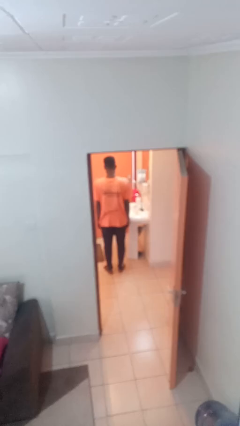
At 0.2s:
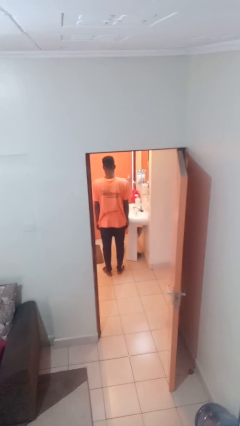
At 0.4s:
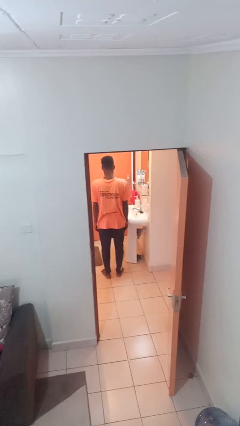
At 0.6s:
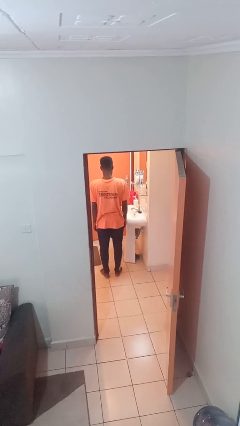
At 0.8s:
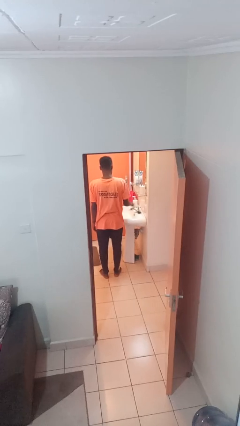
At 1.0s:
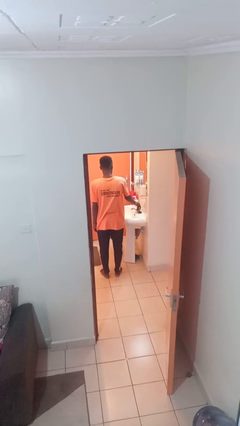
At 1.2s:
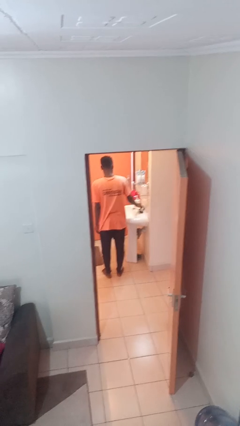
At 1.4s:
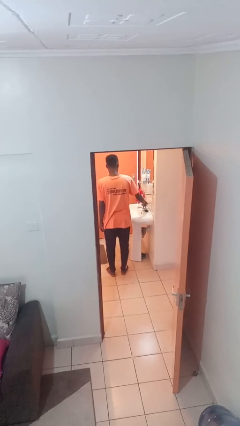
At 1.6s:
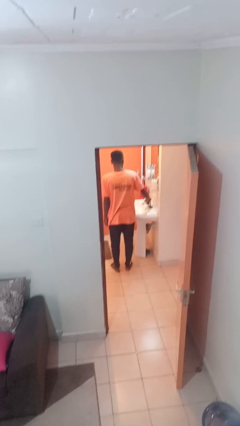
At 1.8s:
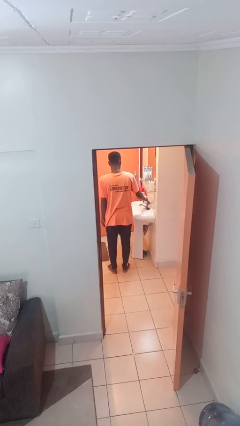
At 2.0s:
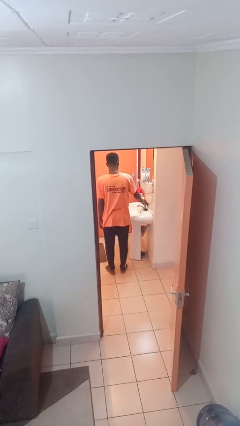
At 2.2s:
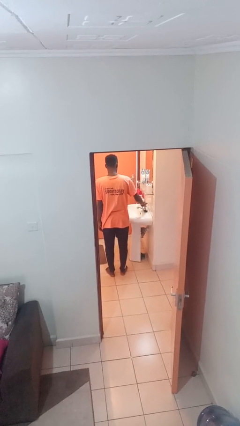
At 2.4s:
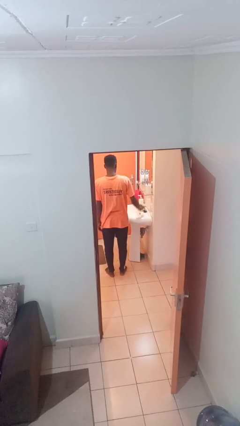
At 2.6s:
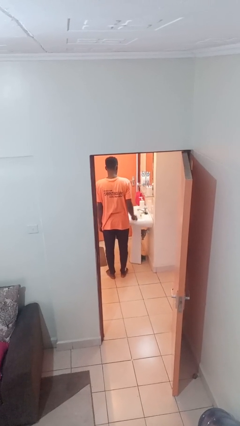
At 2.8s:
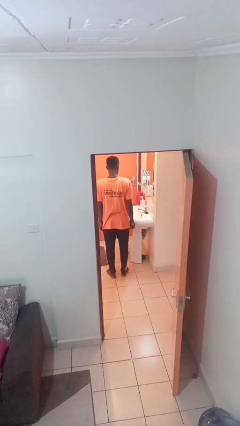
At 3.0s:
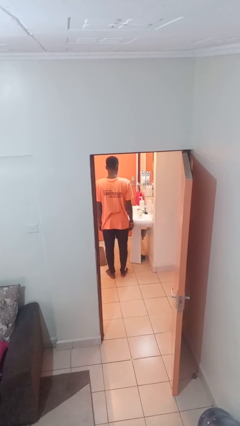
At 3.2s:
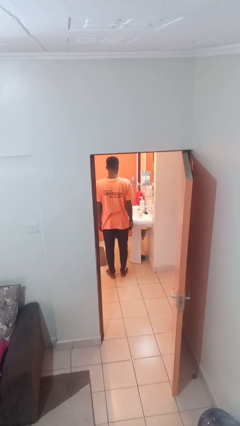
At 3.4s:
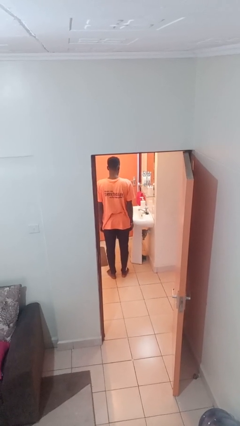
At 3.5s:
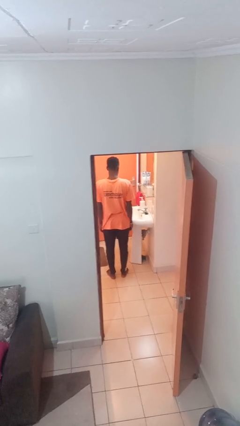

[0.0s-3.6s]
person turns on faucet

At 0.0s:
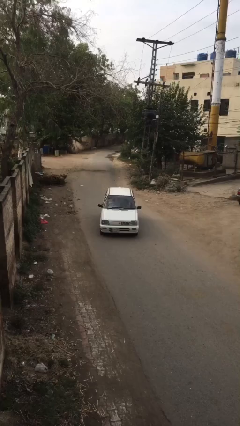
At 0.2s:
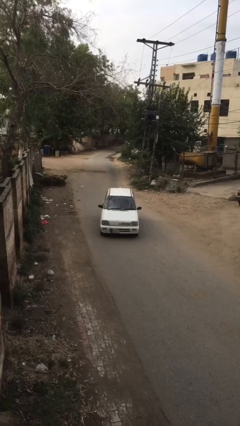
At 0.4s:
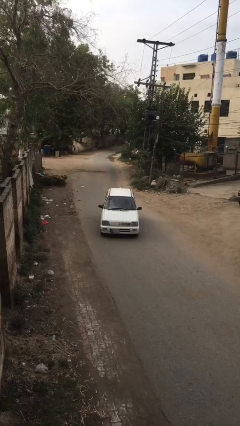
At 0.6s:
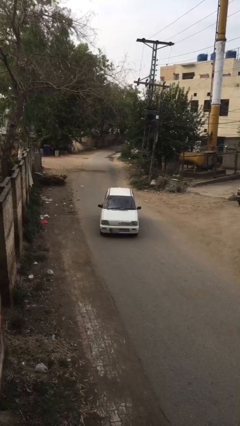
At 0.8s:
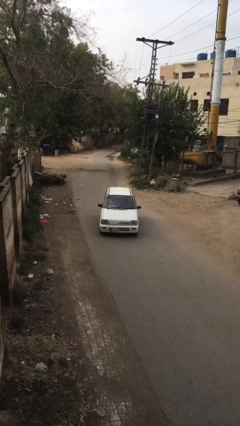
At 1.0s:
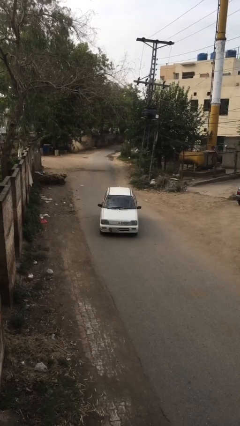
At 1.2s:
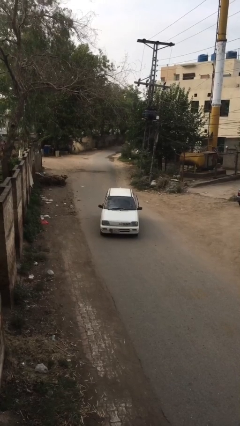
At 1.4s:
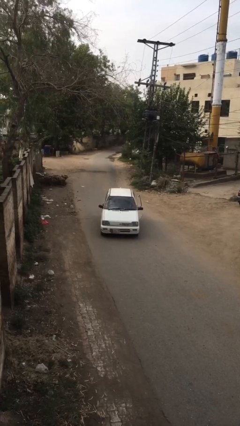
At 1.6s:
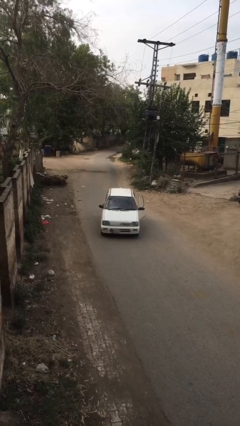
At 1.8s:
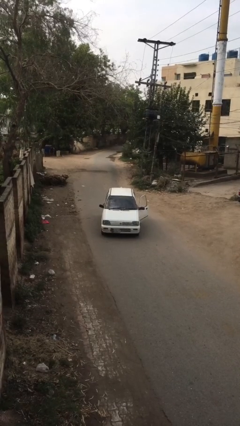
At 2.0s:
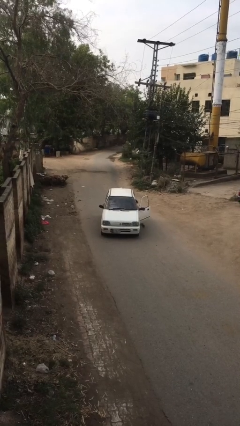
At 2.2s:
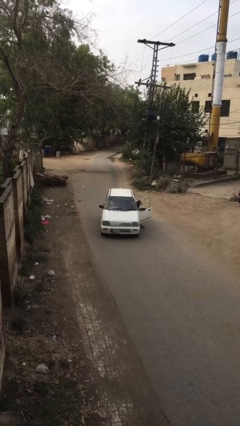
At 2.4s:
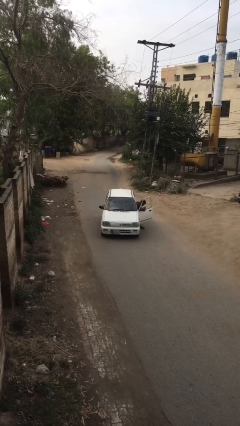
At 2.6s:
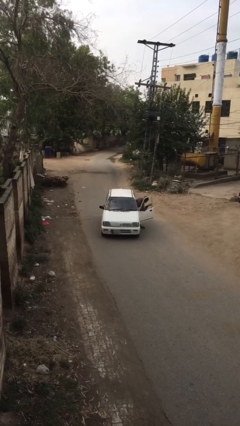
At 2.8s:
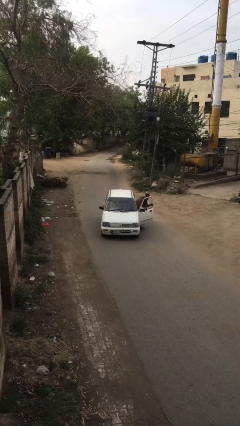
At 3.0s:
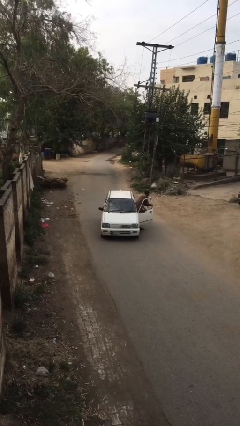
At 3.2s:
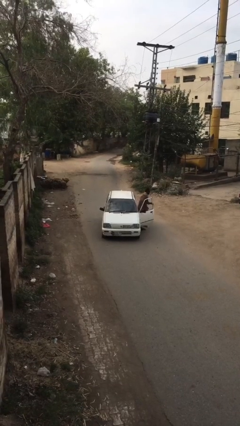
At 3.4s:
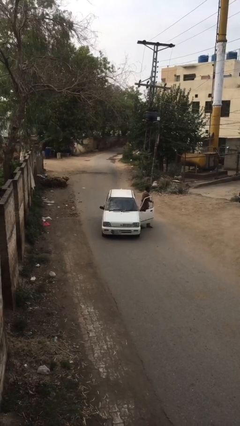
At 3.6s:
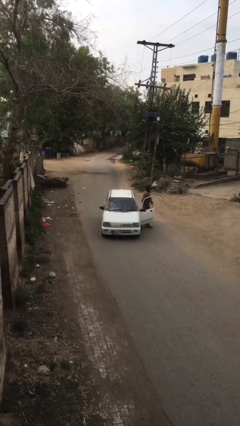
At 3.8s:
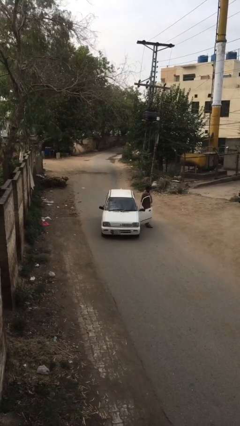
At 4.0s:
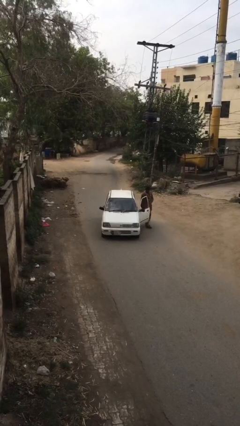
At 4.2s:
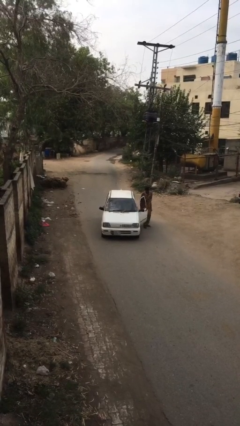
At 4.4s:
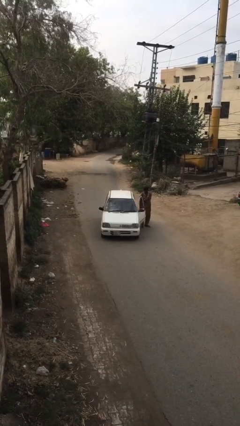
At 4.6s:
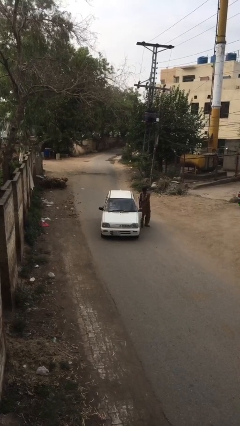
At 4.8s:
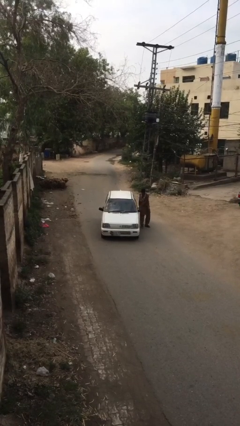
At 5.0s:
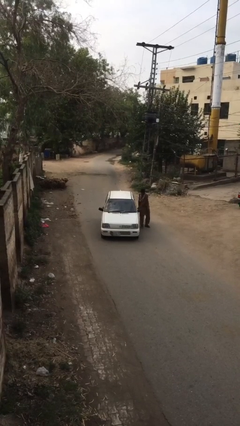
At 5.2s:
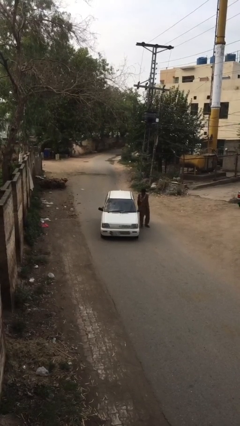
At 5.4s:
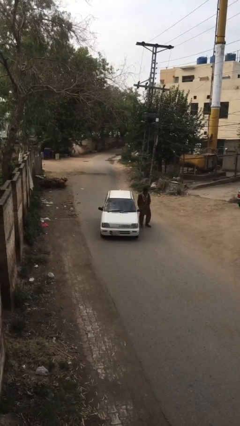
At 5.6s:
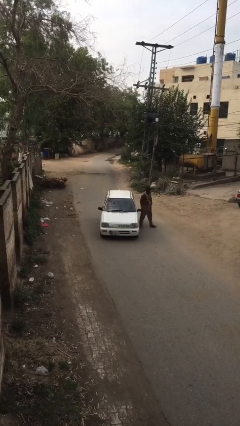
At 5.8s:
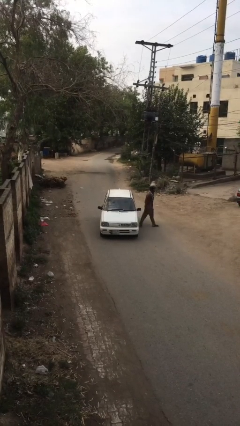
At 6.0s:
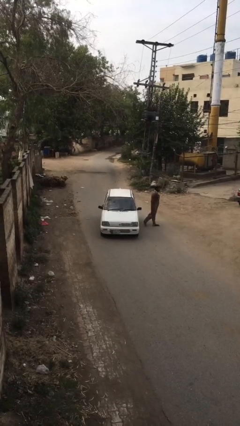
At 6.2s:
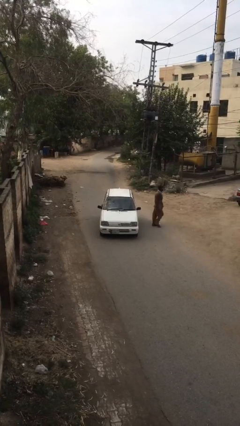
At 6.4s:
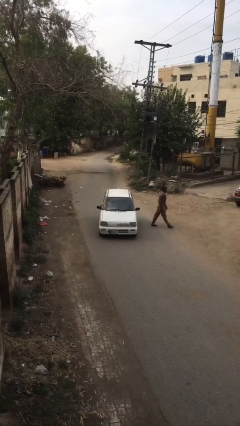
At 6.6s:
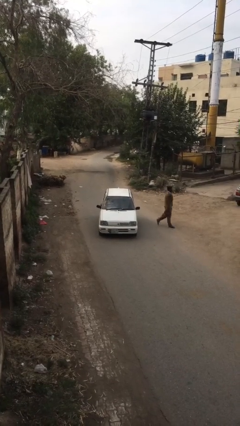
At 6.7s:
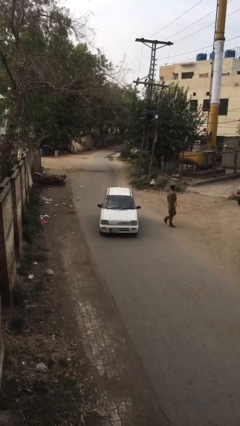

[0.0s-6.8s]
car drops off person

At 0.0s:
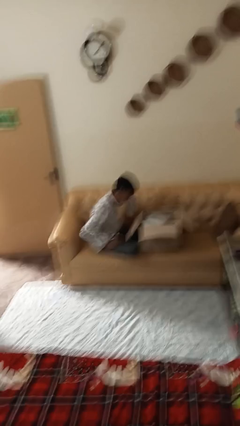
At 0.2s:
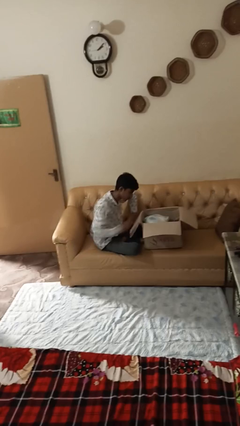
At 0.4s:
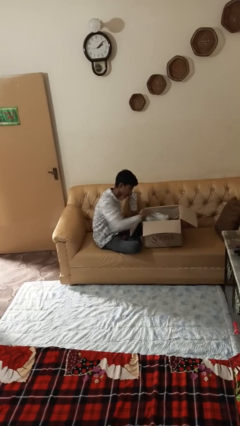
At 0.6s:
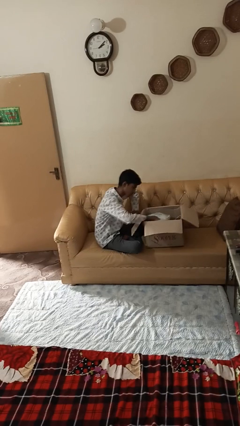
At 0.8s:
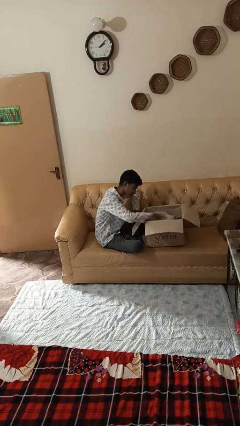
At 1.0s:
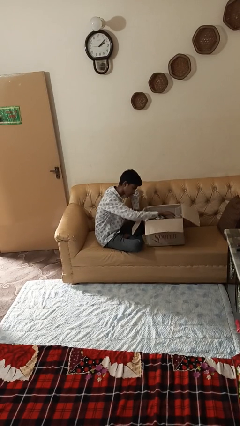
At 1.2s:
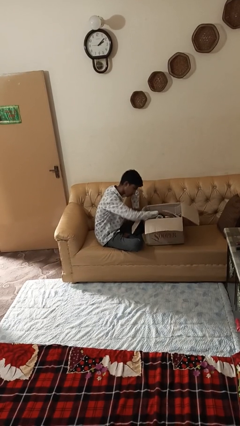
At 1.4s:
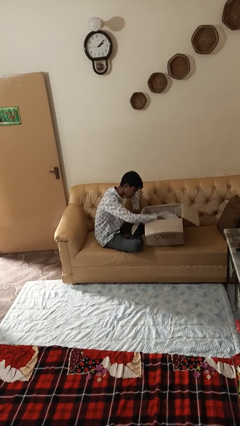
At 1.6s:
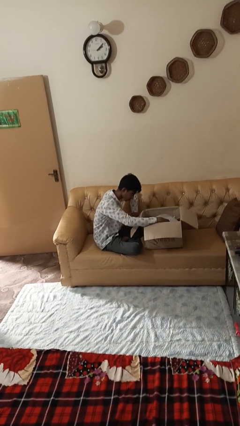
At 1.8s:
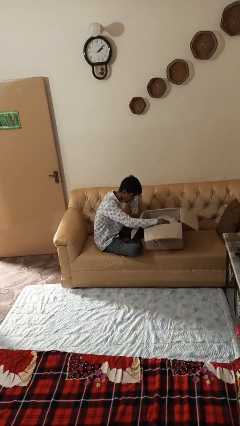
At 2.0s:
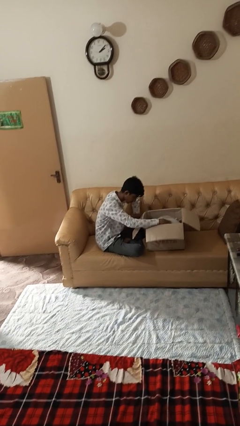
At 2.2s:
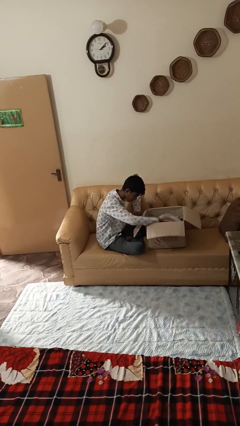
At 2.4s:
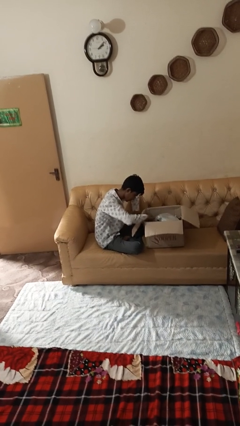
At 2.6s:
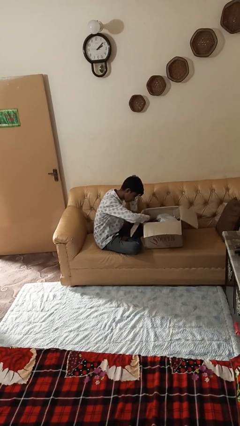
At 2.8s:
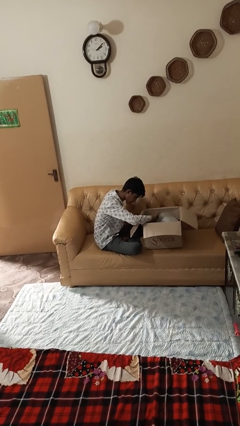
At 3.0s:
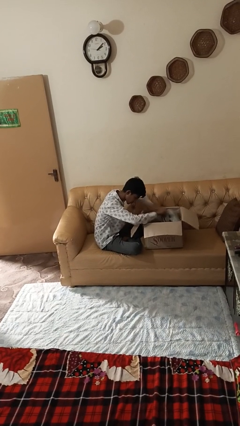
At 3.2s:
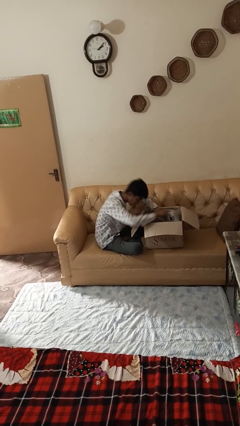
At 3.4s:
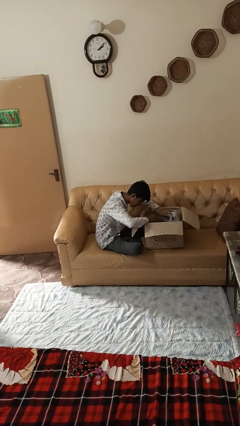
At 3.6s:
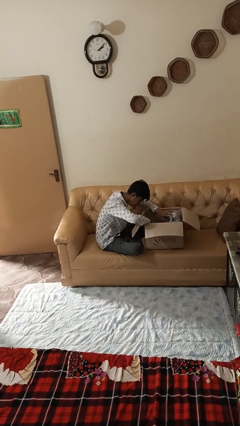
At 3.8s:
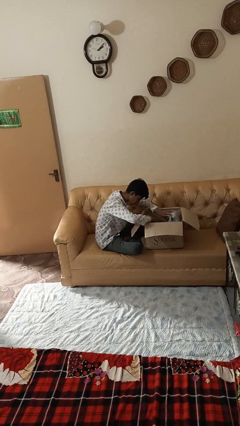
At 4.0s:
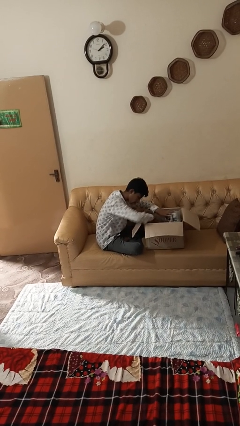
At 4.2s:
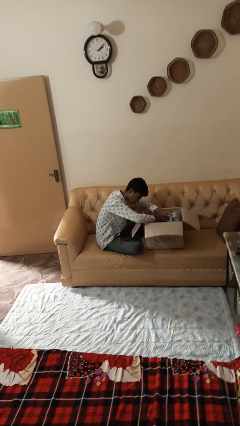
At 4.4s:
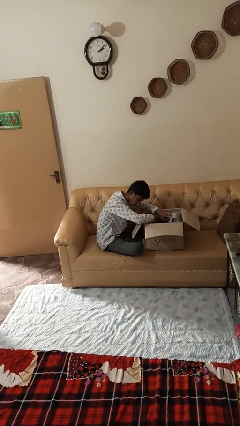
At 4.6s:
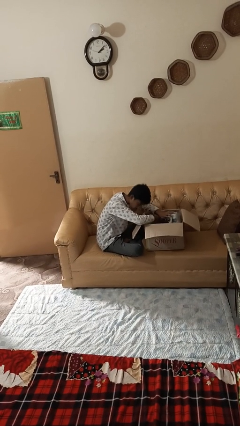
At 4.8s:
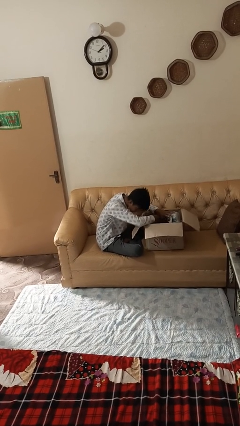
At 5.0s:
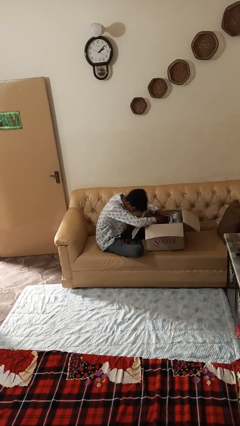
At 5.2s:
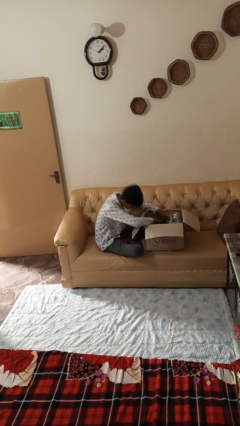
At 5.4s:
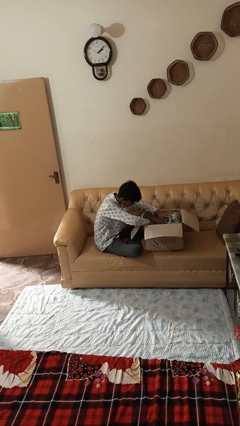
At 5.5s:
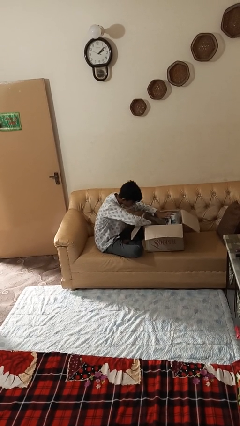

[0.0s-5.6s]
person searches in box

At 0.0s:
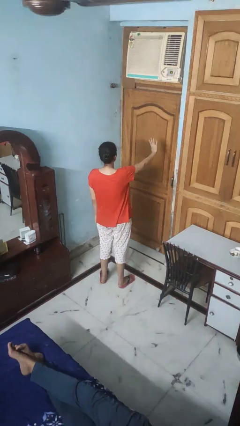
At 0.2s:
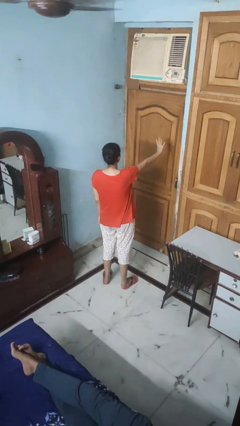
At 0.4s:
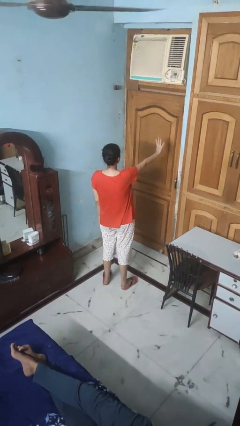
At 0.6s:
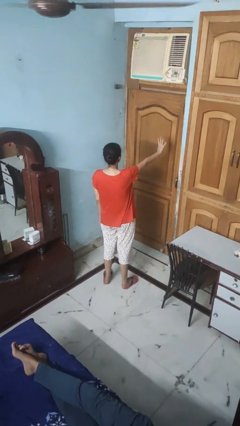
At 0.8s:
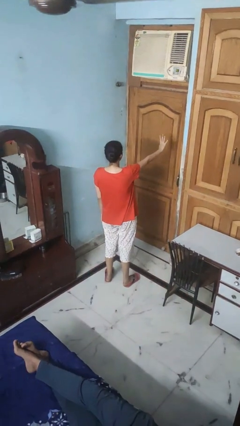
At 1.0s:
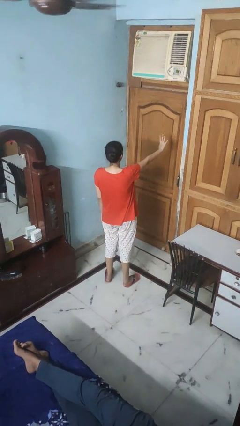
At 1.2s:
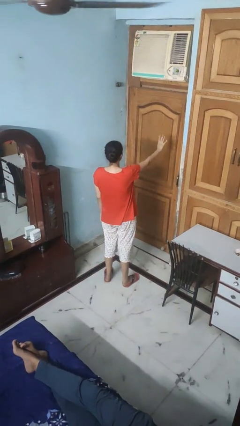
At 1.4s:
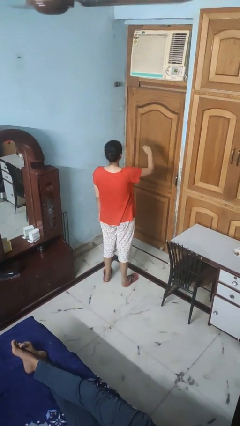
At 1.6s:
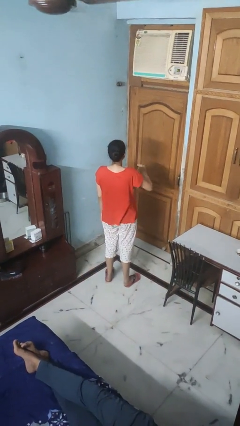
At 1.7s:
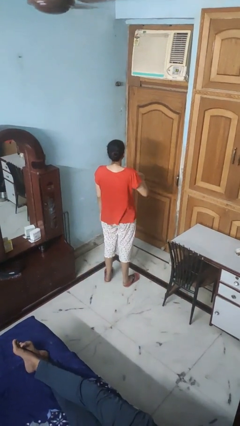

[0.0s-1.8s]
person gestures number four

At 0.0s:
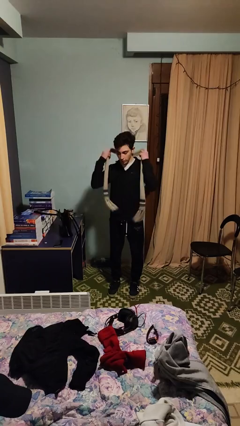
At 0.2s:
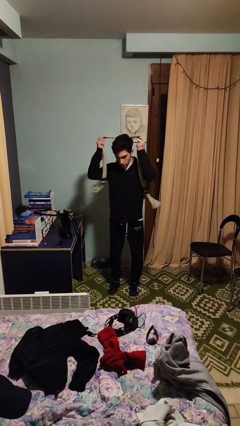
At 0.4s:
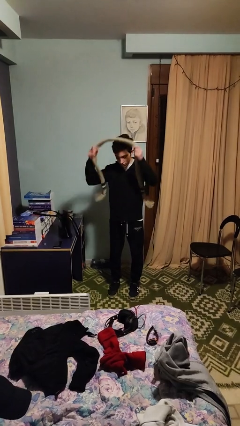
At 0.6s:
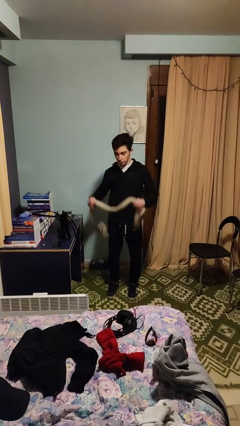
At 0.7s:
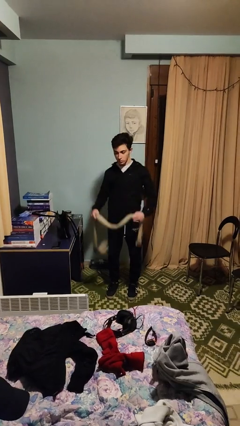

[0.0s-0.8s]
person takes off scarf
